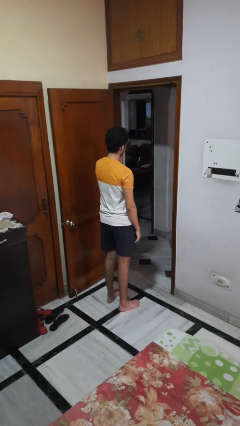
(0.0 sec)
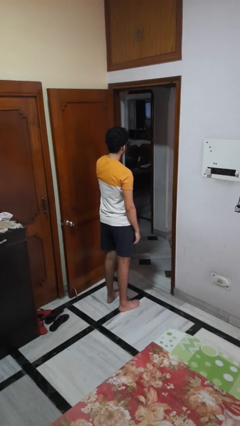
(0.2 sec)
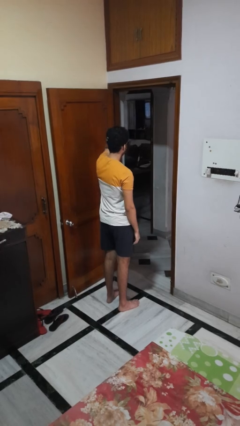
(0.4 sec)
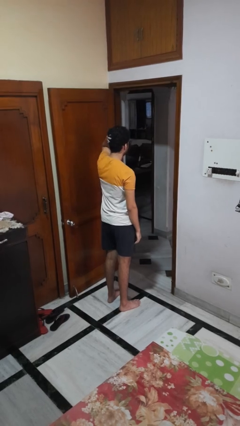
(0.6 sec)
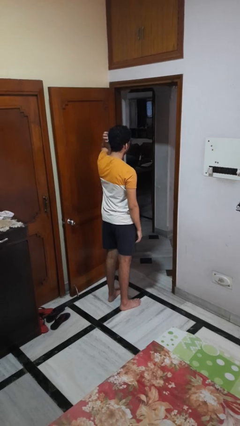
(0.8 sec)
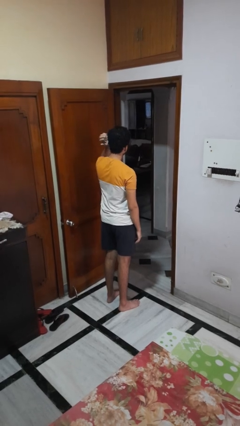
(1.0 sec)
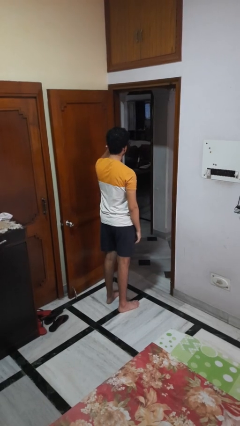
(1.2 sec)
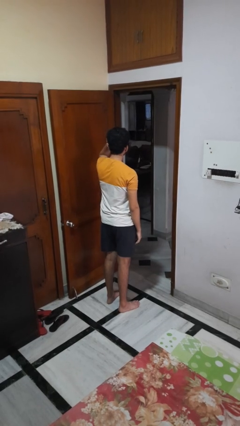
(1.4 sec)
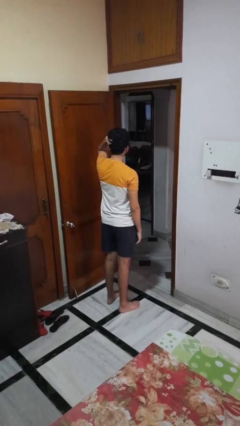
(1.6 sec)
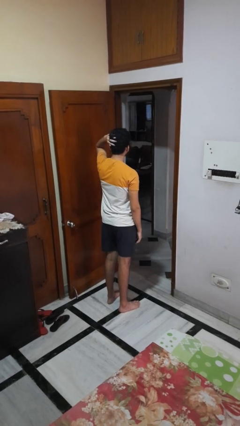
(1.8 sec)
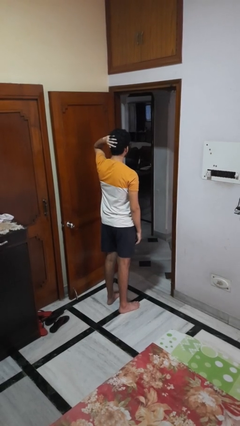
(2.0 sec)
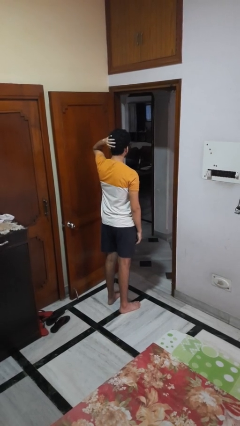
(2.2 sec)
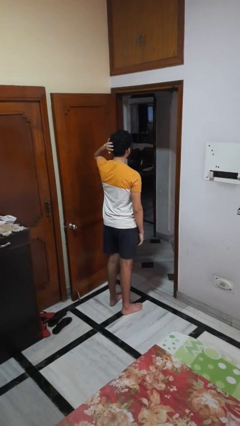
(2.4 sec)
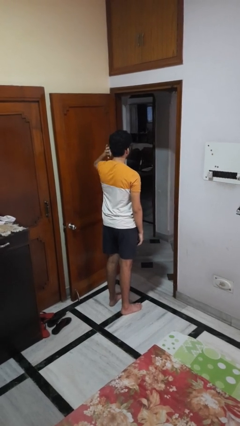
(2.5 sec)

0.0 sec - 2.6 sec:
person strokes hair

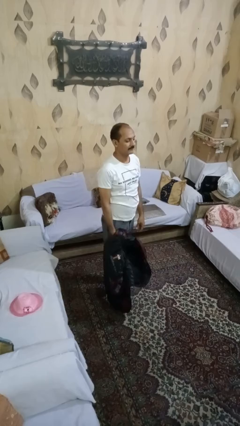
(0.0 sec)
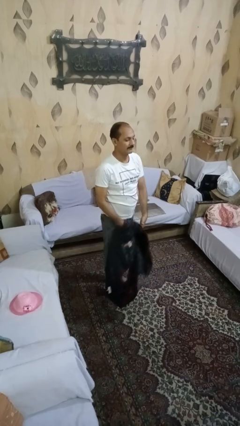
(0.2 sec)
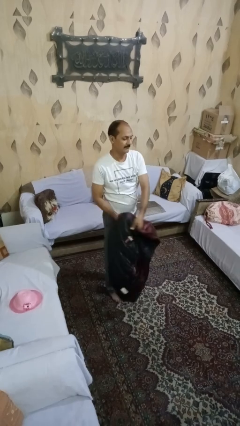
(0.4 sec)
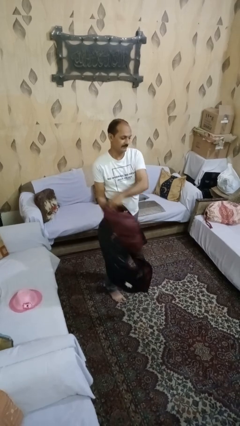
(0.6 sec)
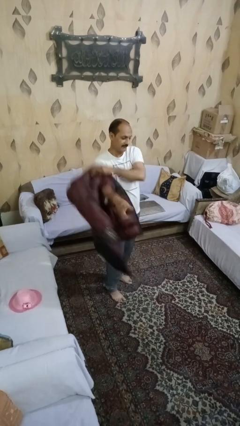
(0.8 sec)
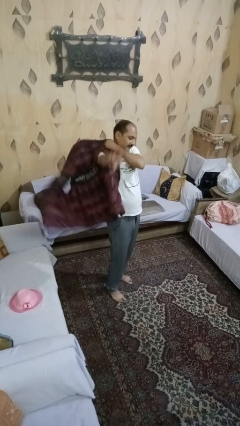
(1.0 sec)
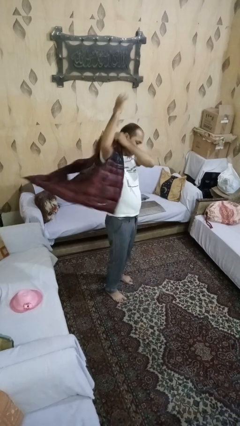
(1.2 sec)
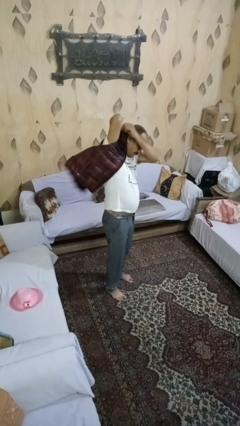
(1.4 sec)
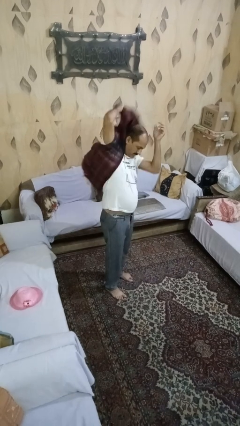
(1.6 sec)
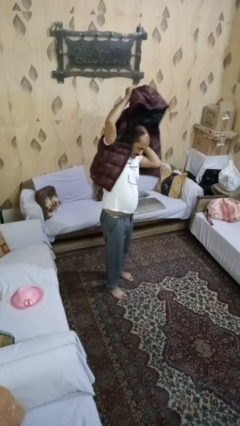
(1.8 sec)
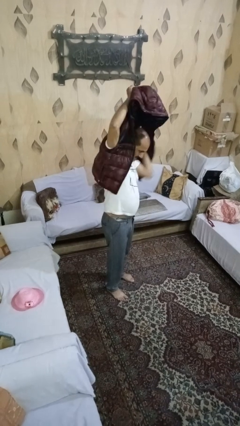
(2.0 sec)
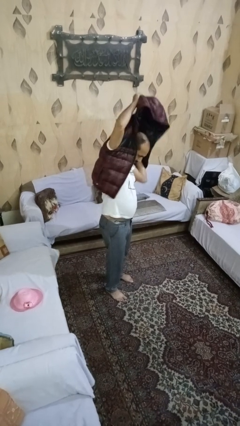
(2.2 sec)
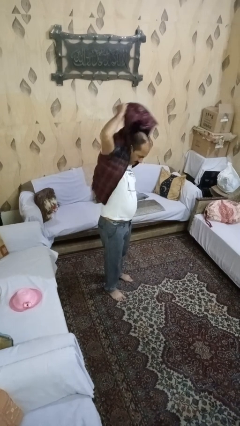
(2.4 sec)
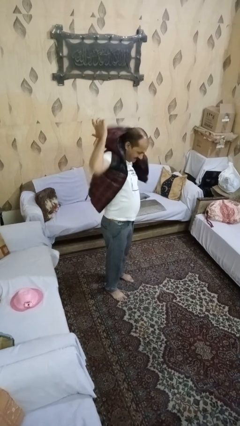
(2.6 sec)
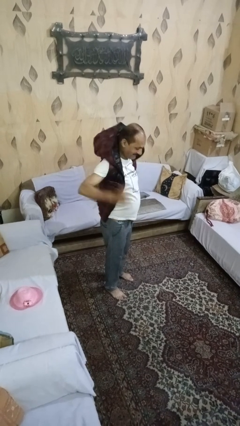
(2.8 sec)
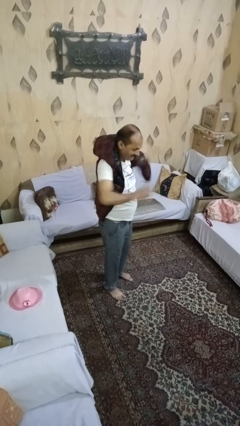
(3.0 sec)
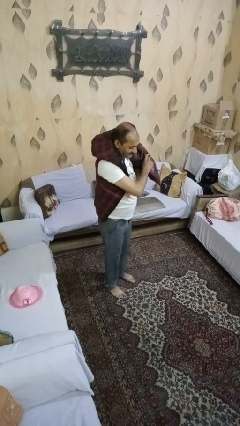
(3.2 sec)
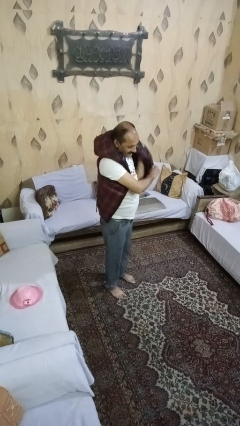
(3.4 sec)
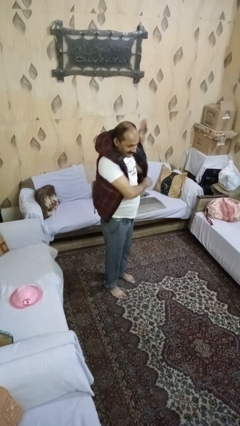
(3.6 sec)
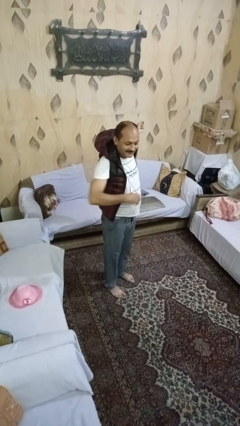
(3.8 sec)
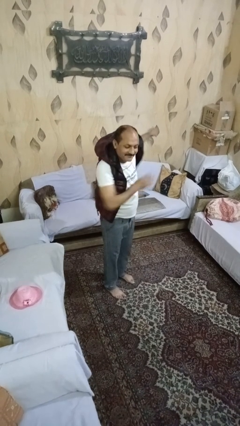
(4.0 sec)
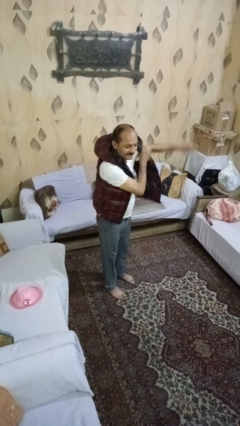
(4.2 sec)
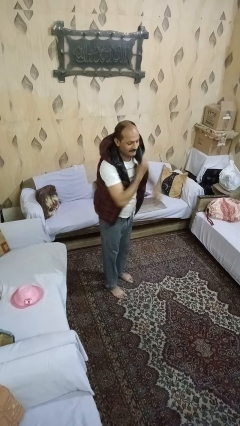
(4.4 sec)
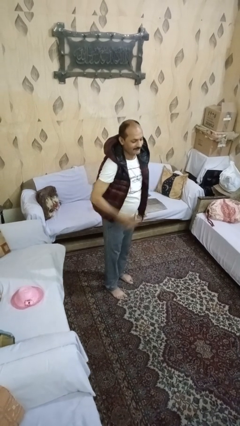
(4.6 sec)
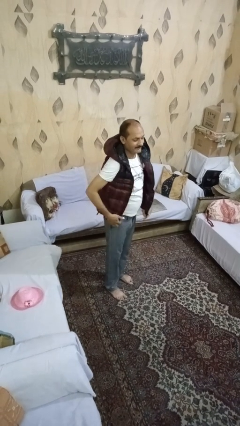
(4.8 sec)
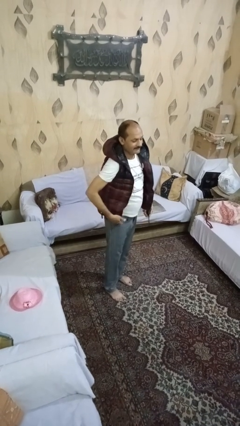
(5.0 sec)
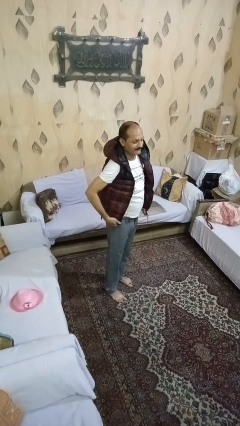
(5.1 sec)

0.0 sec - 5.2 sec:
person puts on jacket

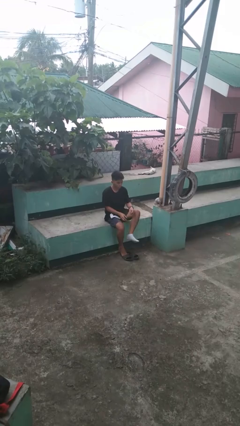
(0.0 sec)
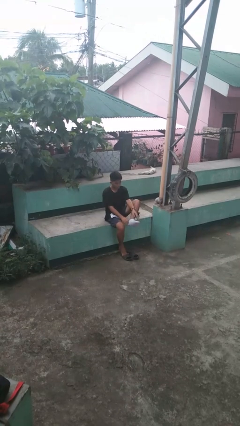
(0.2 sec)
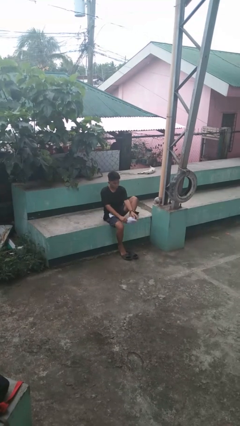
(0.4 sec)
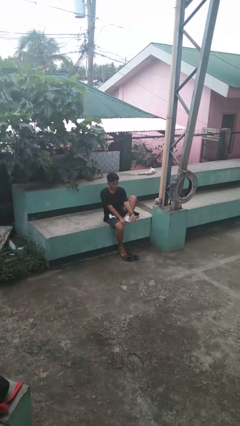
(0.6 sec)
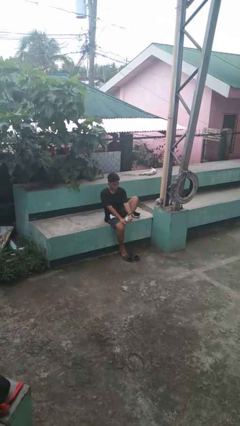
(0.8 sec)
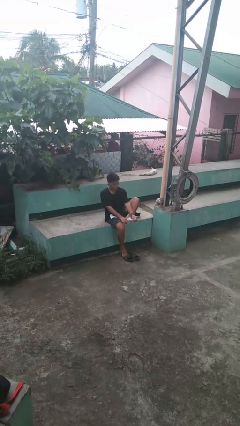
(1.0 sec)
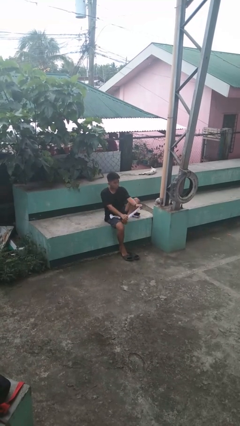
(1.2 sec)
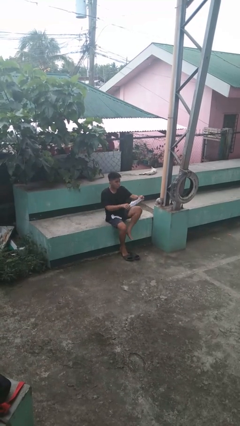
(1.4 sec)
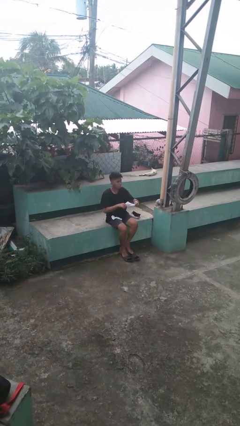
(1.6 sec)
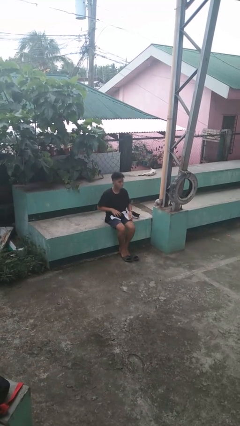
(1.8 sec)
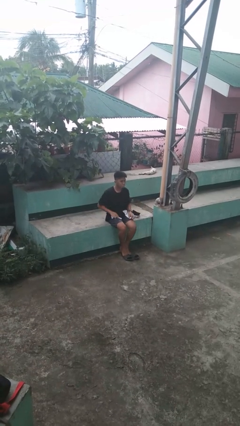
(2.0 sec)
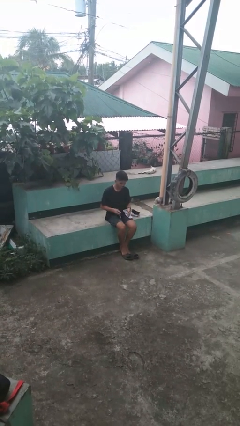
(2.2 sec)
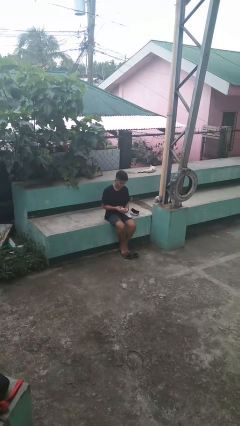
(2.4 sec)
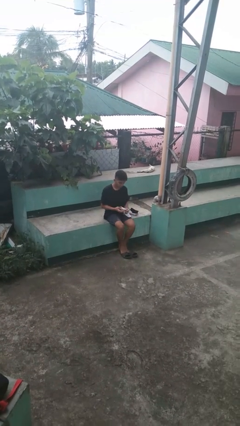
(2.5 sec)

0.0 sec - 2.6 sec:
person takes off socks

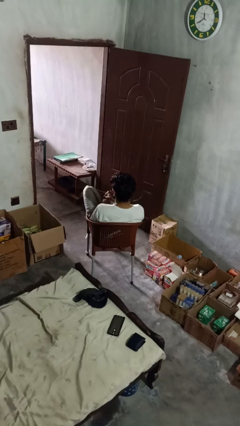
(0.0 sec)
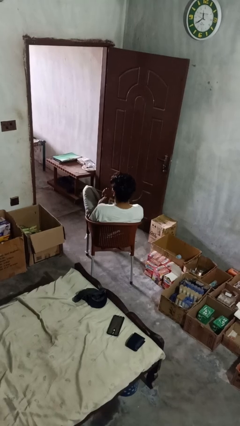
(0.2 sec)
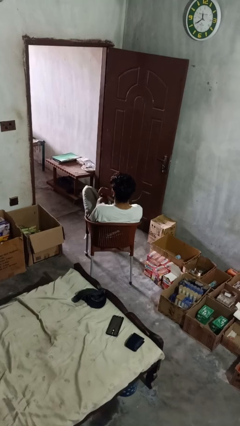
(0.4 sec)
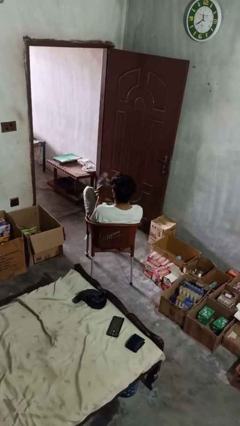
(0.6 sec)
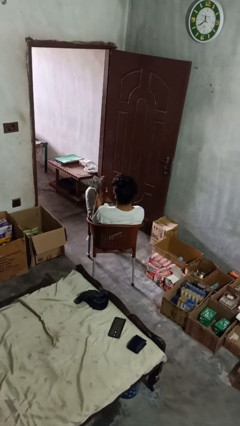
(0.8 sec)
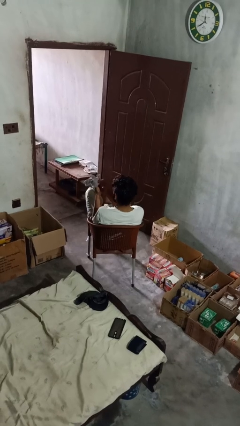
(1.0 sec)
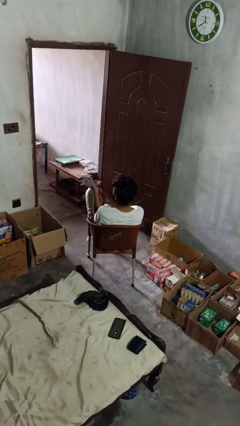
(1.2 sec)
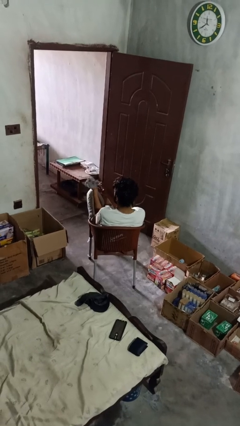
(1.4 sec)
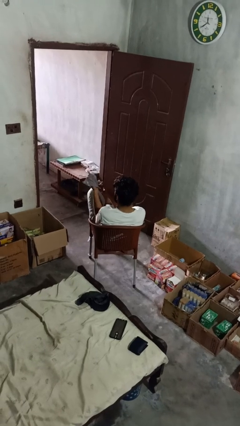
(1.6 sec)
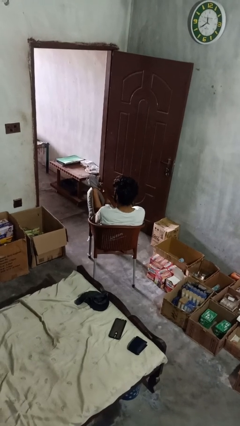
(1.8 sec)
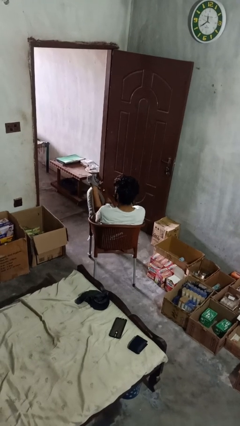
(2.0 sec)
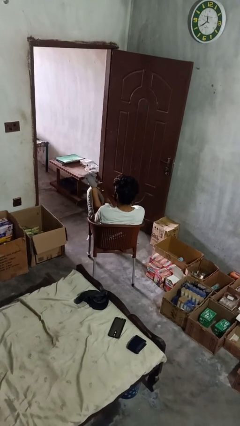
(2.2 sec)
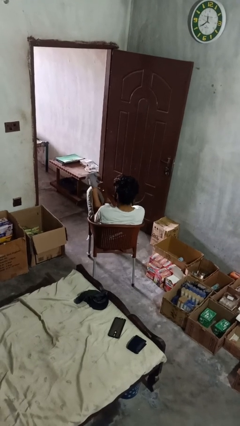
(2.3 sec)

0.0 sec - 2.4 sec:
person puts on gloves

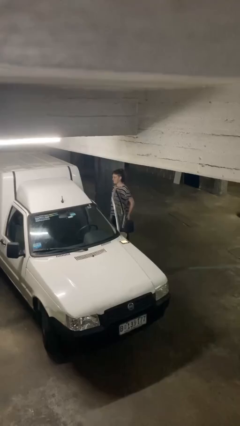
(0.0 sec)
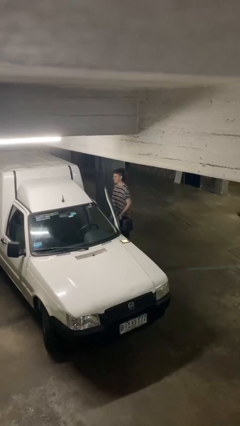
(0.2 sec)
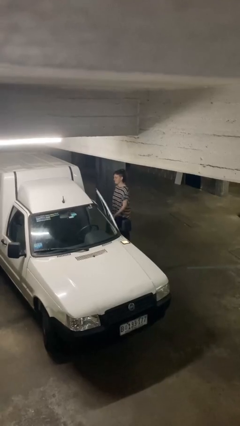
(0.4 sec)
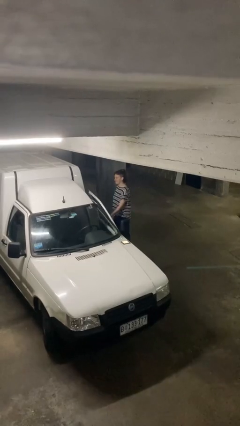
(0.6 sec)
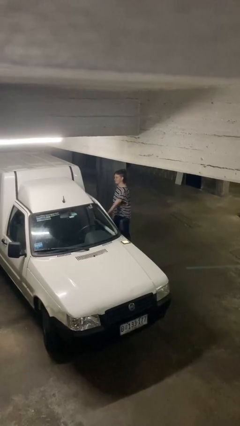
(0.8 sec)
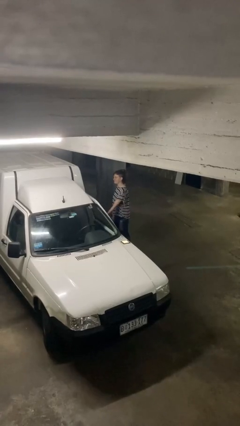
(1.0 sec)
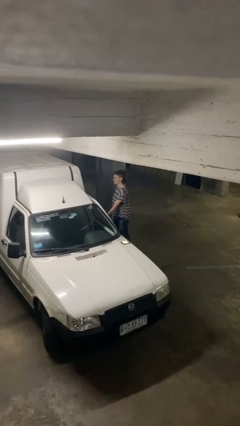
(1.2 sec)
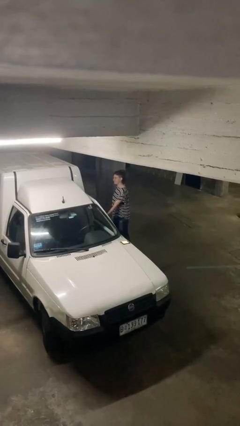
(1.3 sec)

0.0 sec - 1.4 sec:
person closes car door

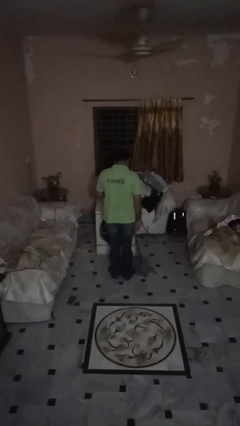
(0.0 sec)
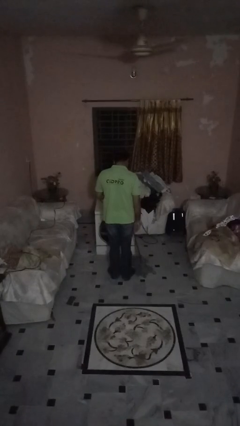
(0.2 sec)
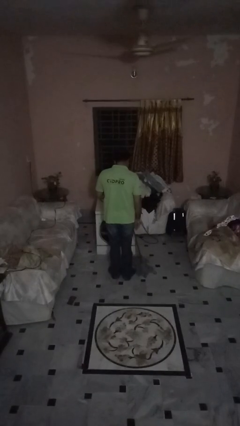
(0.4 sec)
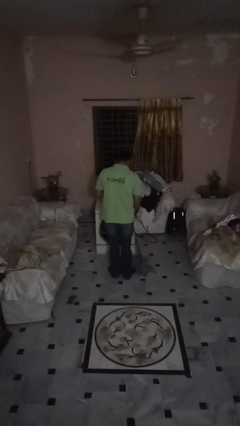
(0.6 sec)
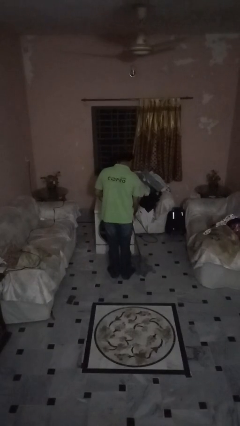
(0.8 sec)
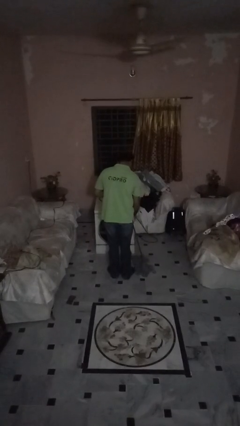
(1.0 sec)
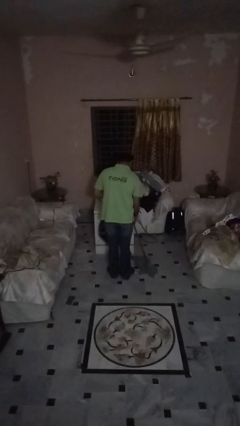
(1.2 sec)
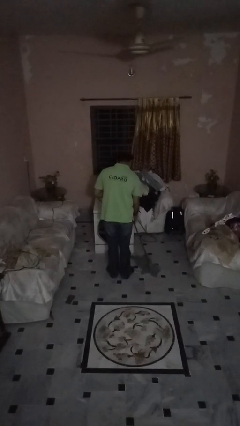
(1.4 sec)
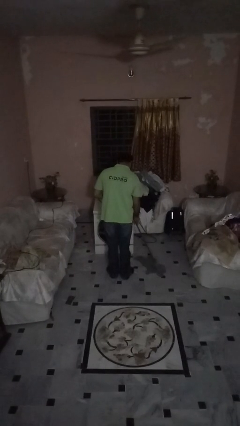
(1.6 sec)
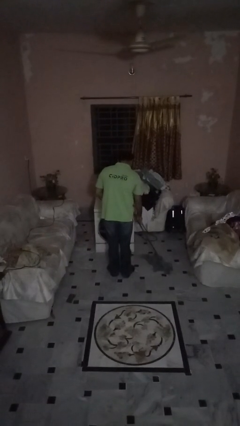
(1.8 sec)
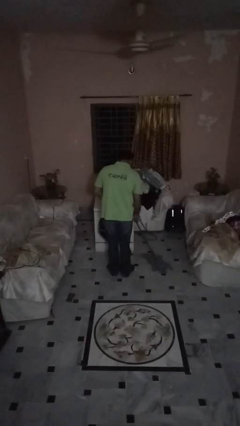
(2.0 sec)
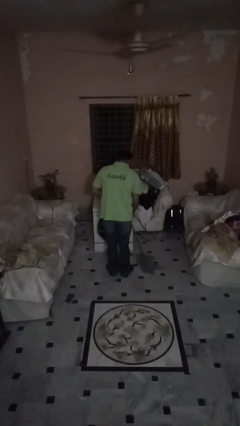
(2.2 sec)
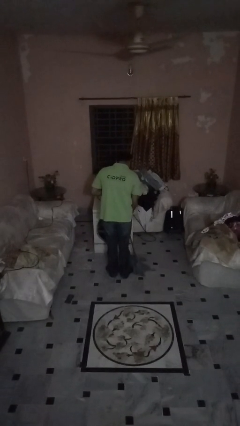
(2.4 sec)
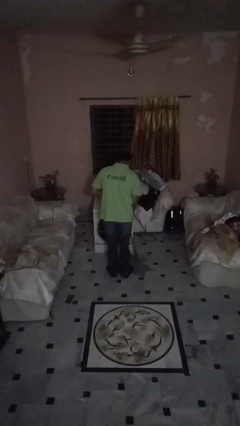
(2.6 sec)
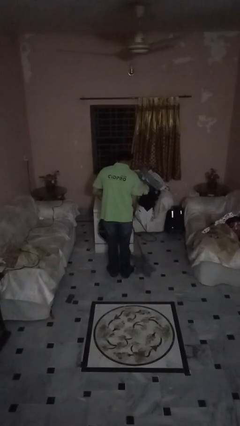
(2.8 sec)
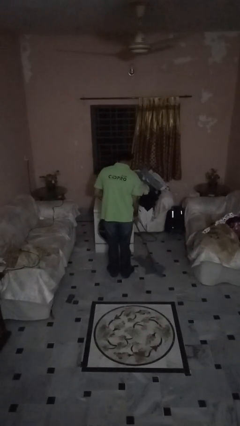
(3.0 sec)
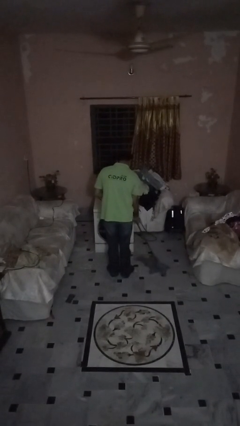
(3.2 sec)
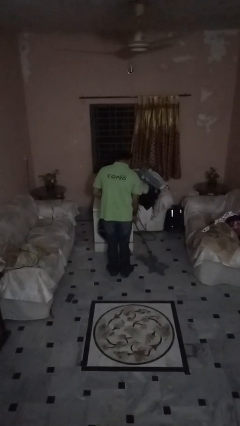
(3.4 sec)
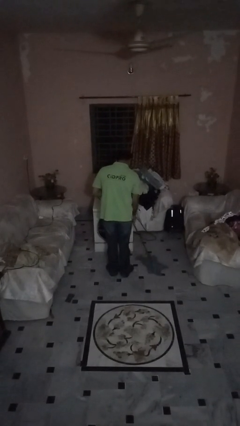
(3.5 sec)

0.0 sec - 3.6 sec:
person mops
